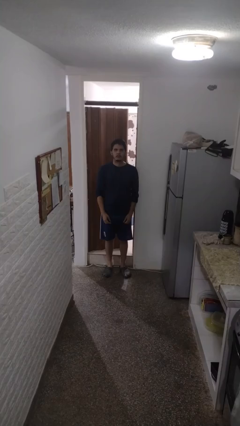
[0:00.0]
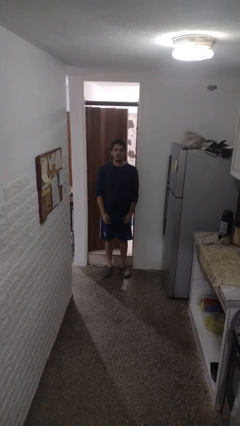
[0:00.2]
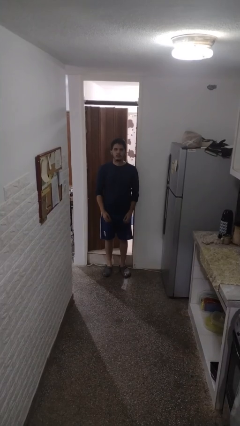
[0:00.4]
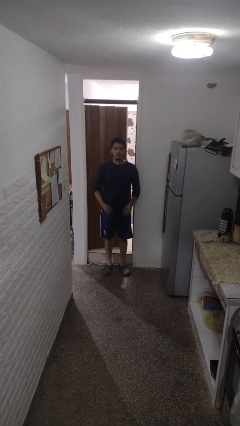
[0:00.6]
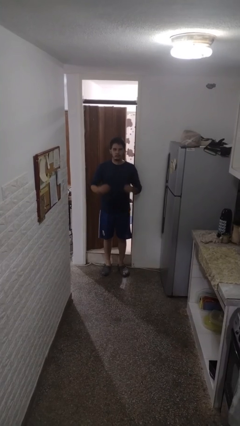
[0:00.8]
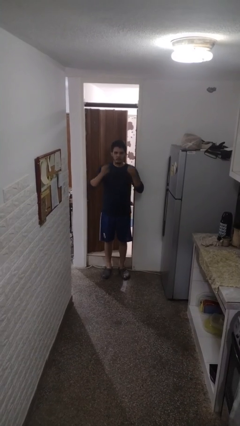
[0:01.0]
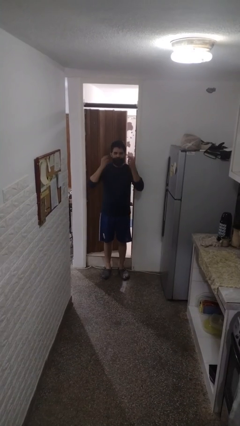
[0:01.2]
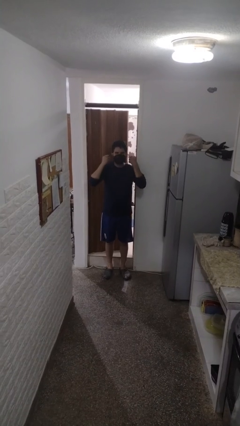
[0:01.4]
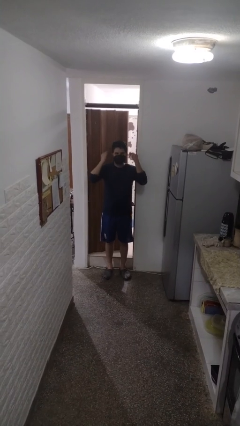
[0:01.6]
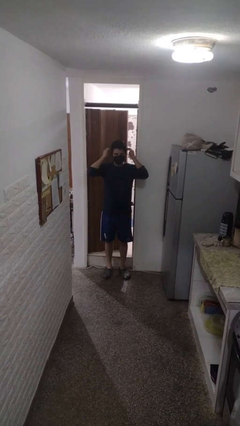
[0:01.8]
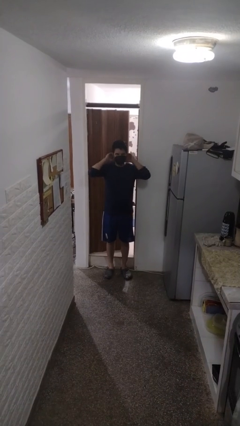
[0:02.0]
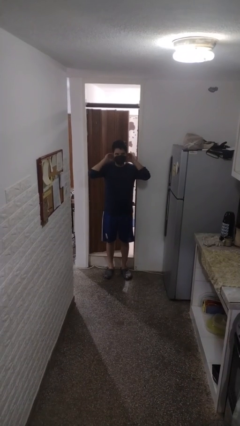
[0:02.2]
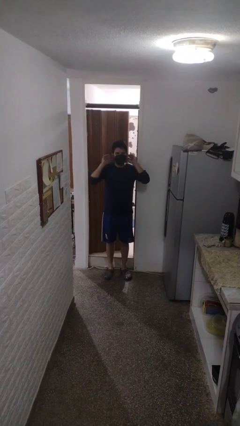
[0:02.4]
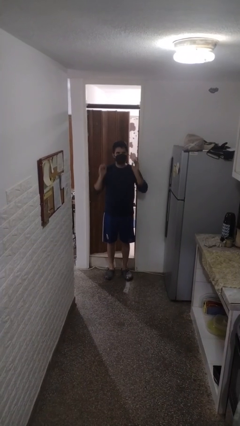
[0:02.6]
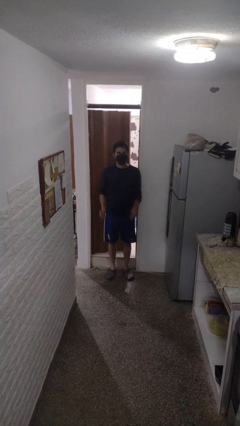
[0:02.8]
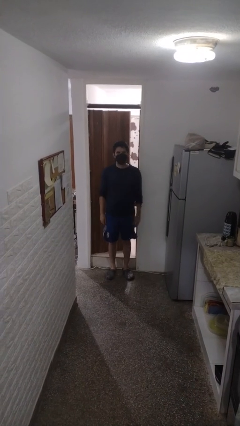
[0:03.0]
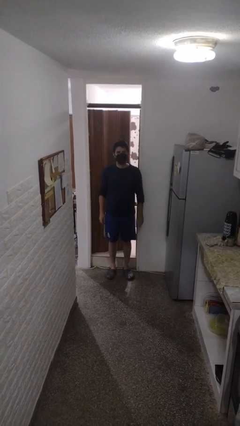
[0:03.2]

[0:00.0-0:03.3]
person puts on facemask

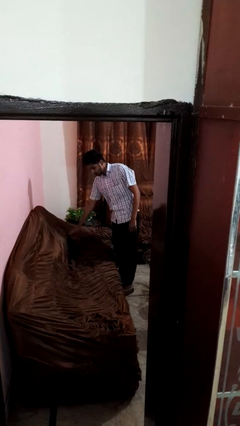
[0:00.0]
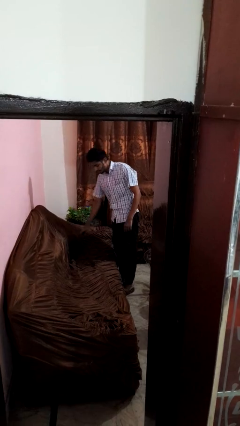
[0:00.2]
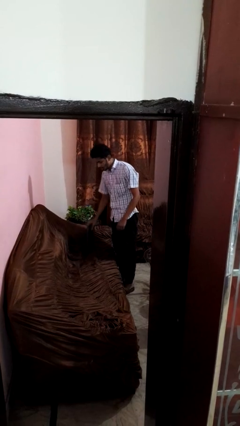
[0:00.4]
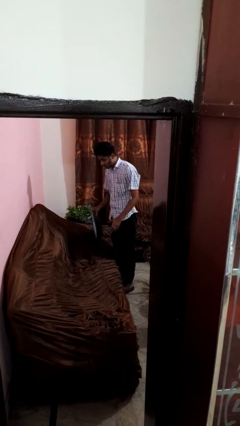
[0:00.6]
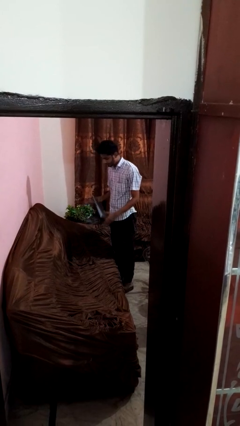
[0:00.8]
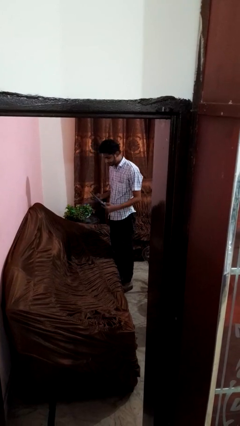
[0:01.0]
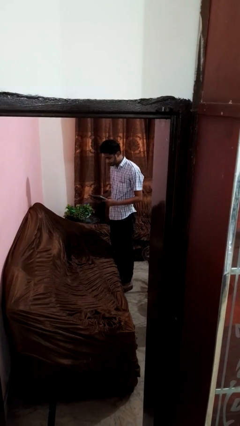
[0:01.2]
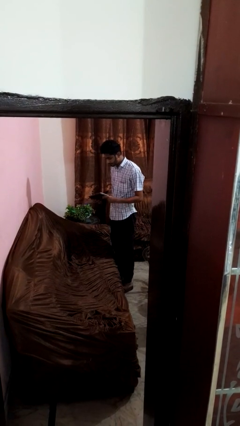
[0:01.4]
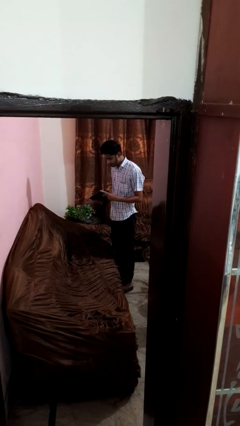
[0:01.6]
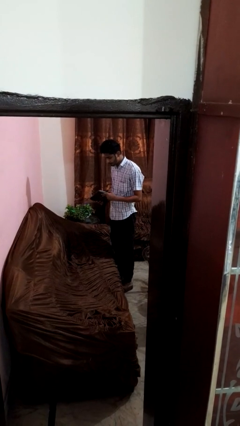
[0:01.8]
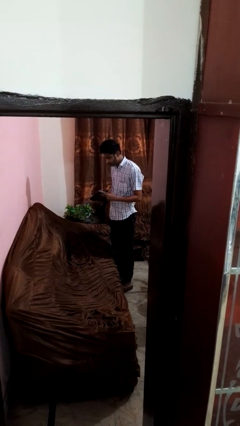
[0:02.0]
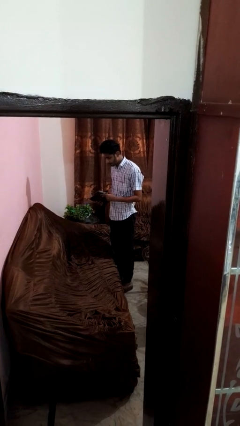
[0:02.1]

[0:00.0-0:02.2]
person picks up object from couch

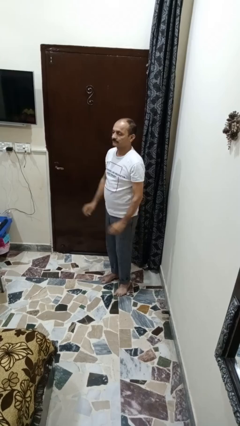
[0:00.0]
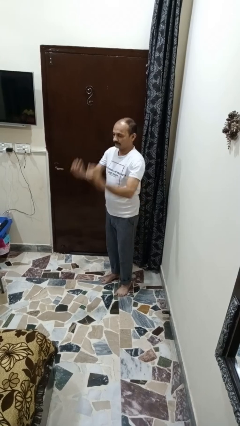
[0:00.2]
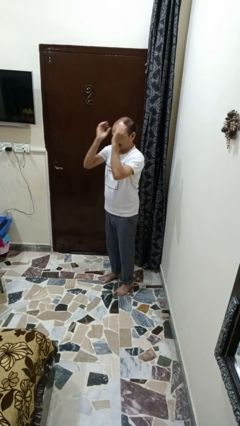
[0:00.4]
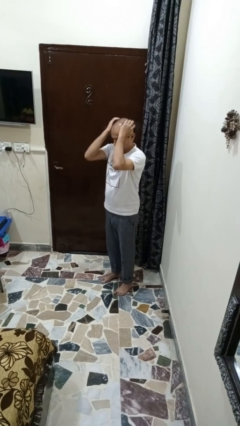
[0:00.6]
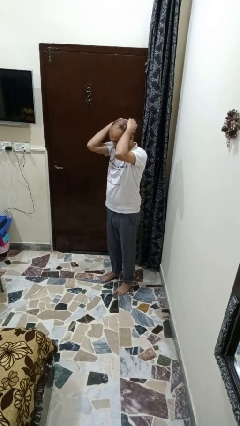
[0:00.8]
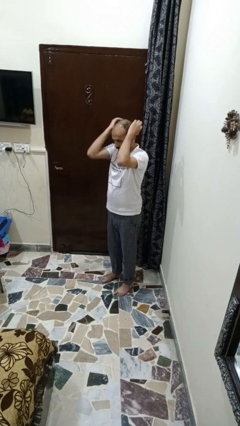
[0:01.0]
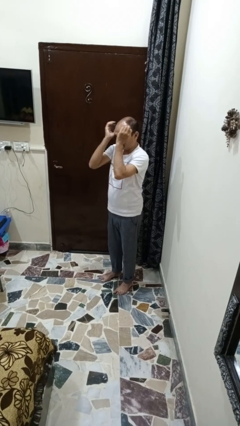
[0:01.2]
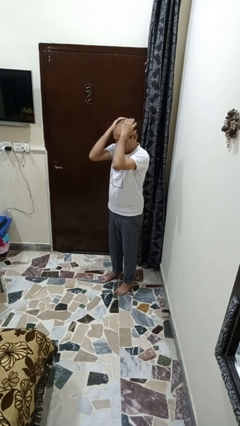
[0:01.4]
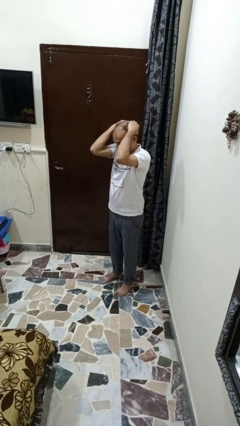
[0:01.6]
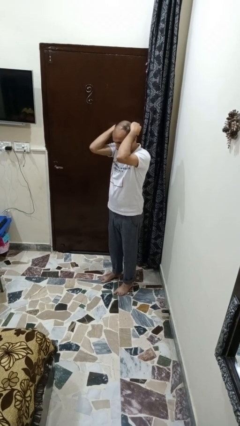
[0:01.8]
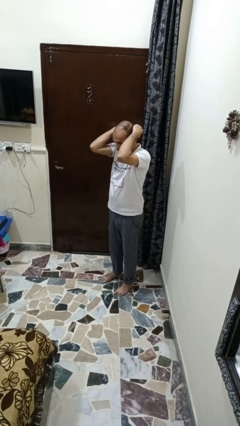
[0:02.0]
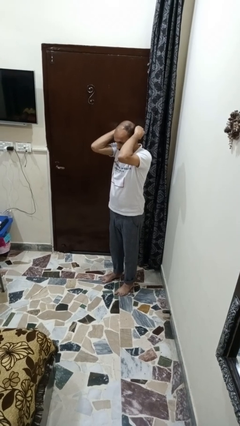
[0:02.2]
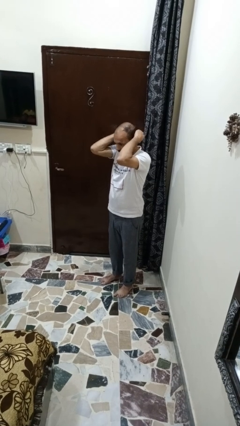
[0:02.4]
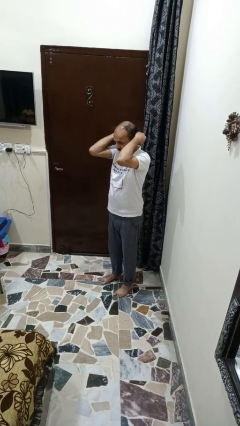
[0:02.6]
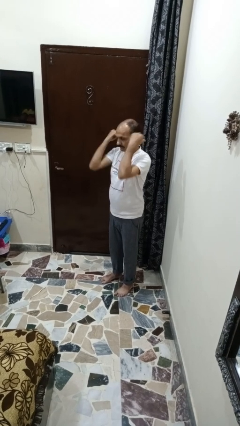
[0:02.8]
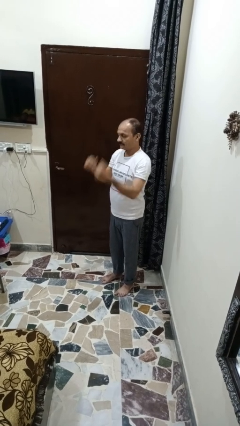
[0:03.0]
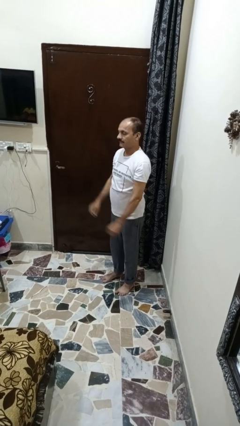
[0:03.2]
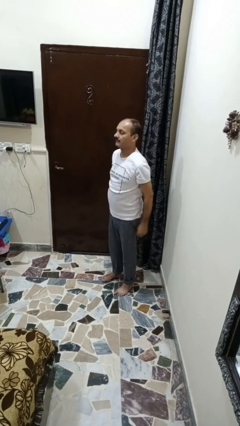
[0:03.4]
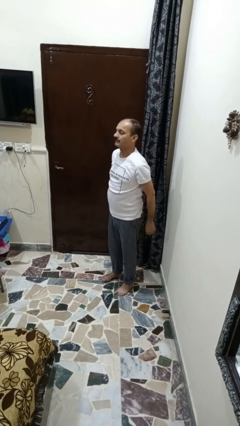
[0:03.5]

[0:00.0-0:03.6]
person strokes hair

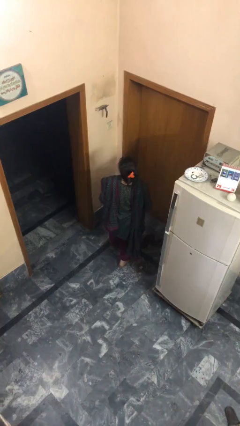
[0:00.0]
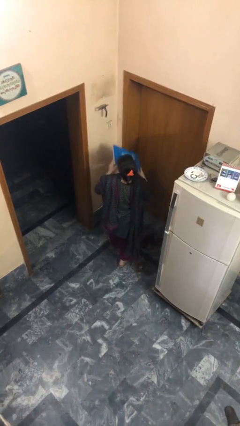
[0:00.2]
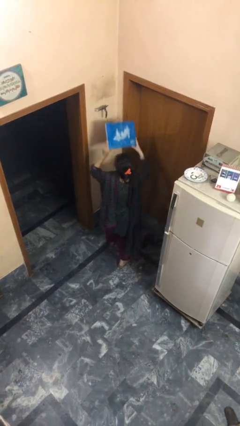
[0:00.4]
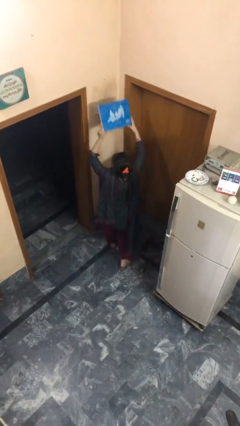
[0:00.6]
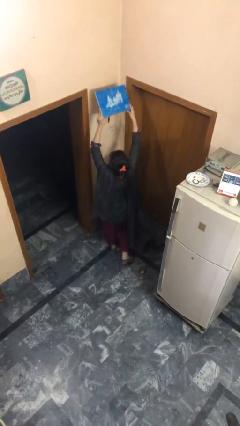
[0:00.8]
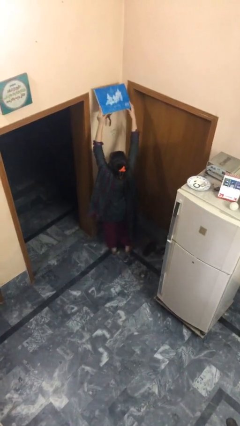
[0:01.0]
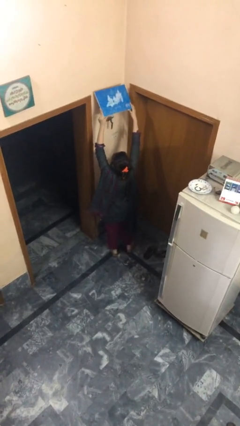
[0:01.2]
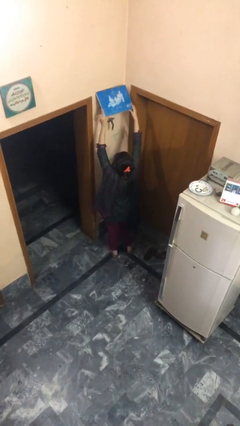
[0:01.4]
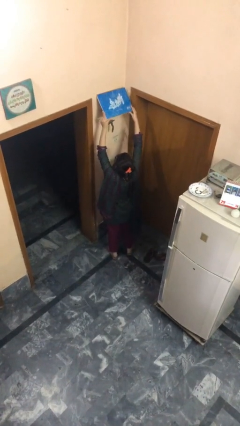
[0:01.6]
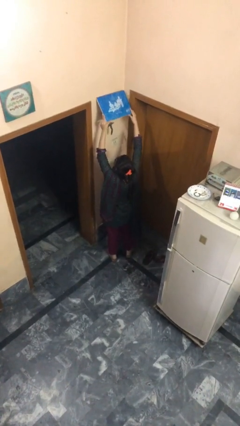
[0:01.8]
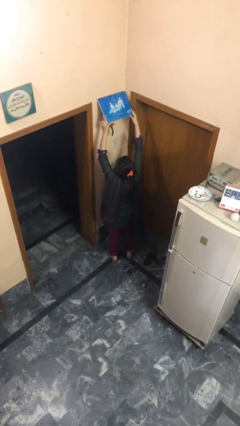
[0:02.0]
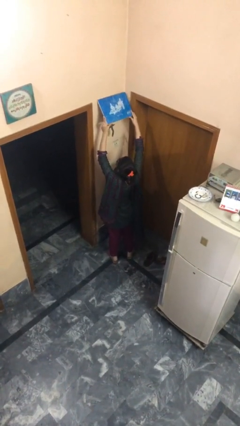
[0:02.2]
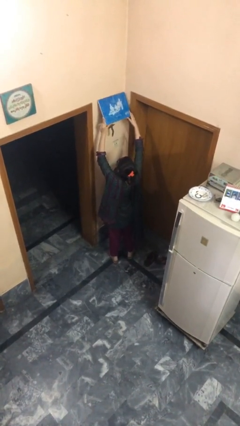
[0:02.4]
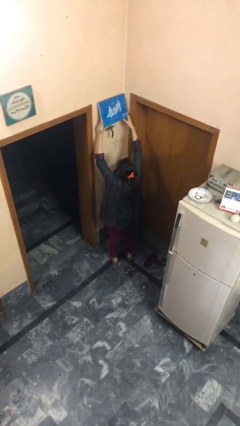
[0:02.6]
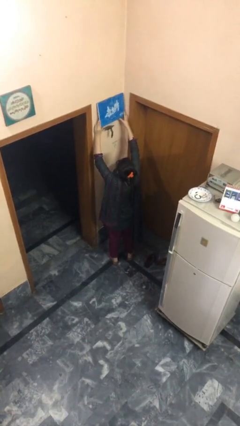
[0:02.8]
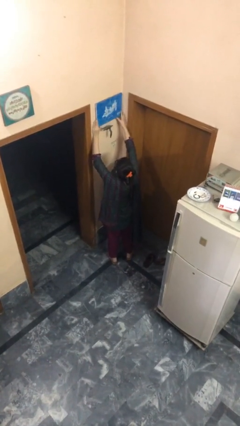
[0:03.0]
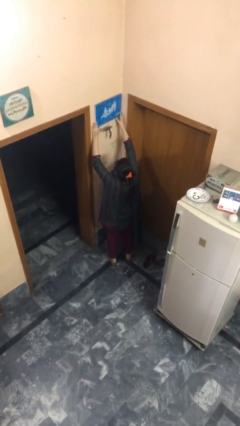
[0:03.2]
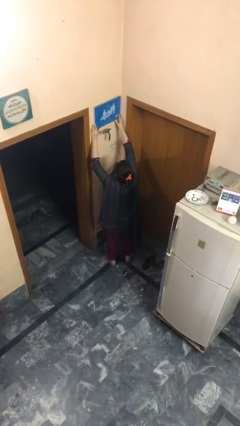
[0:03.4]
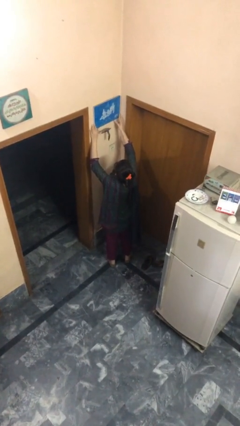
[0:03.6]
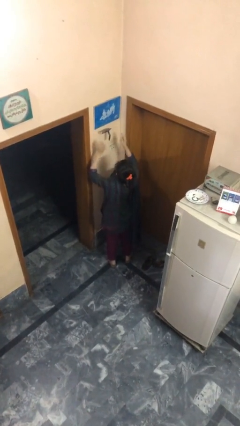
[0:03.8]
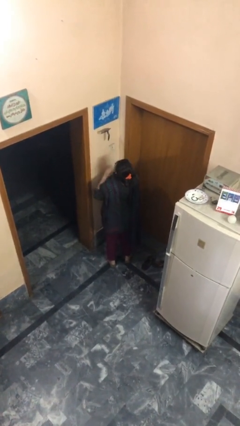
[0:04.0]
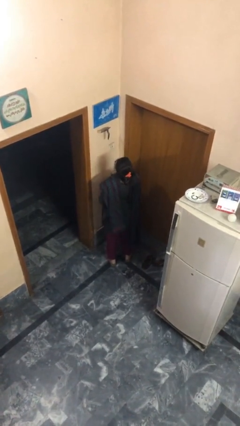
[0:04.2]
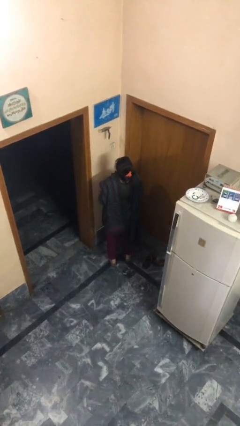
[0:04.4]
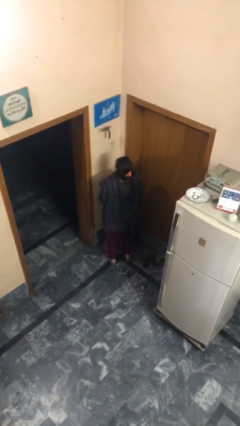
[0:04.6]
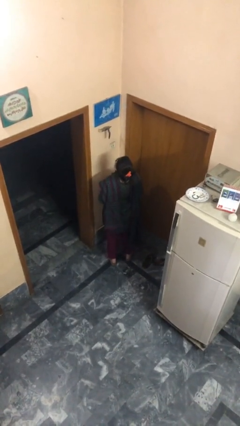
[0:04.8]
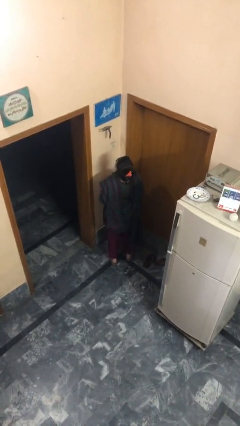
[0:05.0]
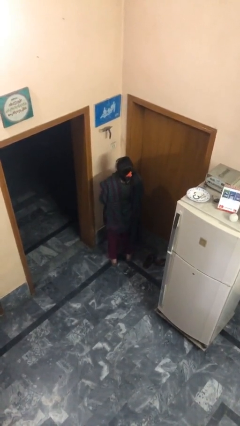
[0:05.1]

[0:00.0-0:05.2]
person puts up picture frame

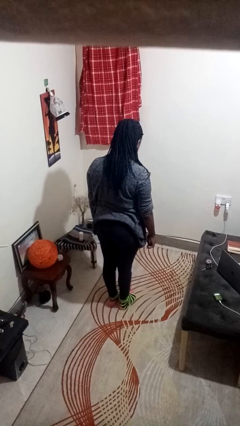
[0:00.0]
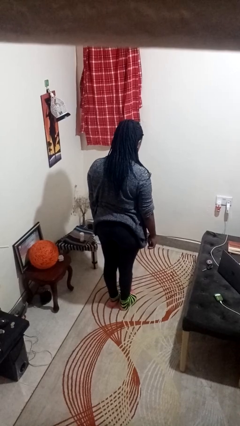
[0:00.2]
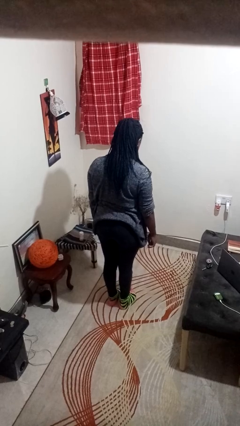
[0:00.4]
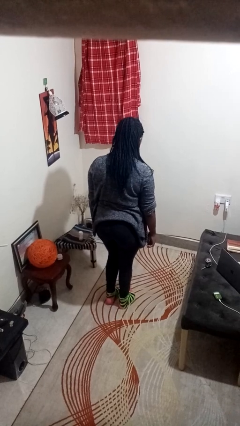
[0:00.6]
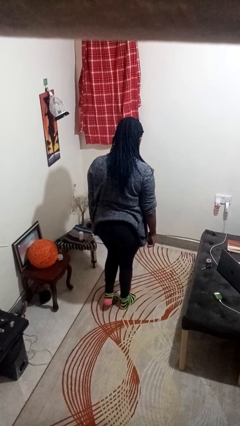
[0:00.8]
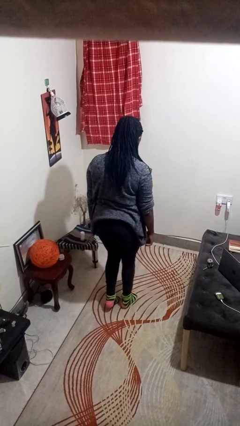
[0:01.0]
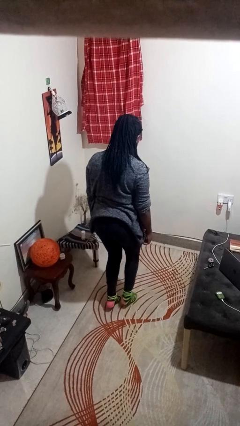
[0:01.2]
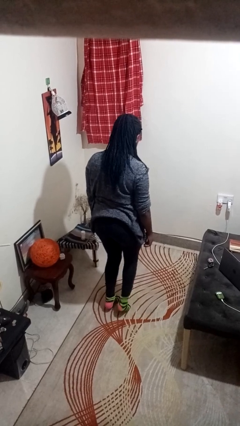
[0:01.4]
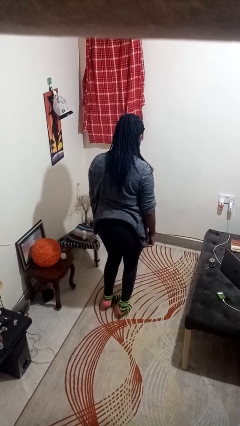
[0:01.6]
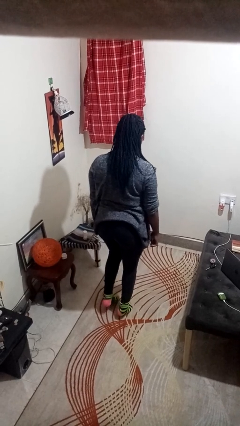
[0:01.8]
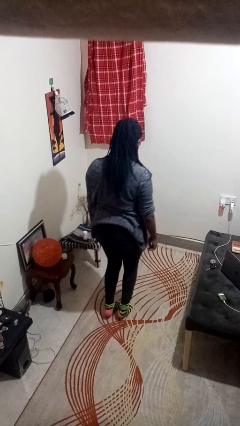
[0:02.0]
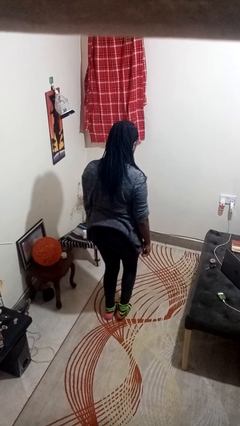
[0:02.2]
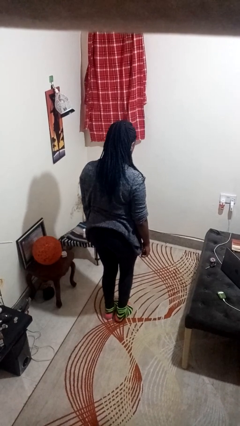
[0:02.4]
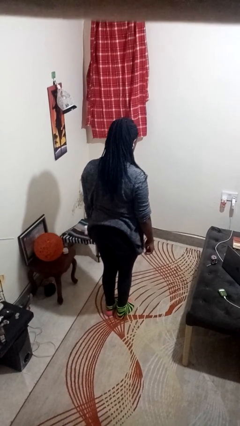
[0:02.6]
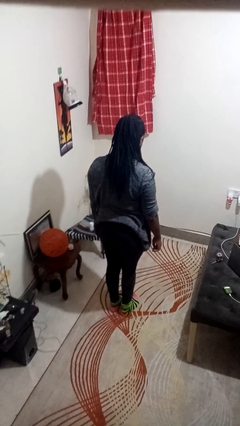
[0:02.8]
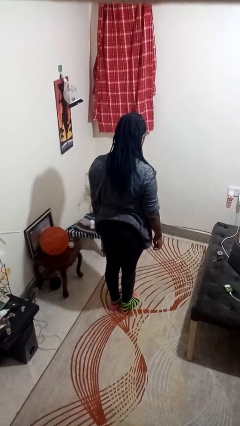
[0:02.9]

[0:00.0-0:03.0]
person walks tiptoe

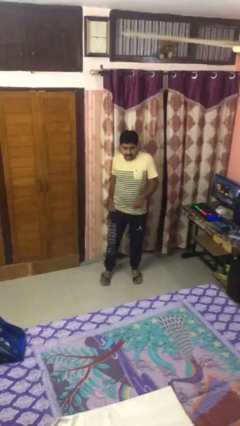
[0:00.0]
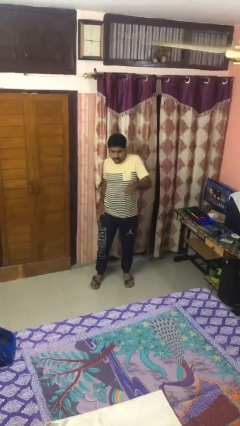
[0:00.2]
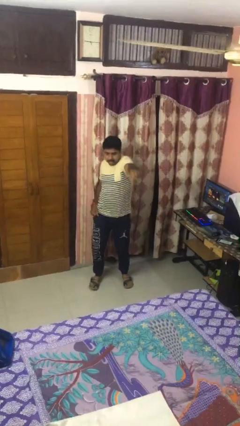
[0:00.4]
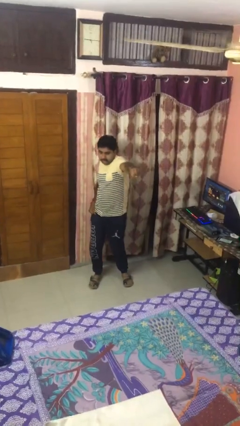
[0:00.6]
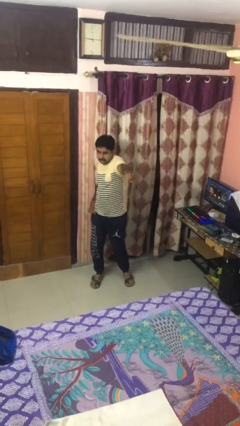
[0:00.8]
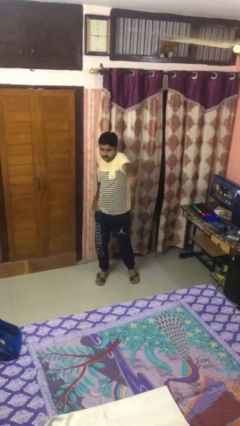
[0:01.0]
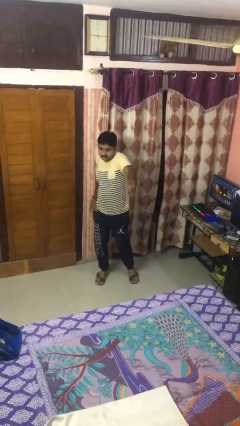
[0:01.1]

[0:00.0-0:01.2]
person punches
